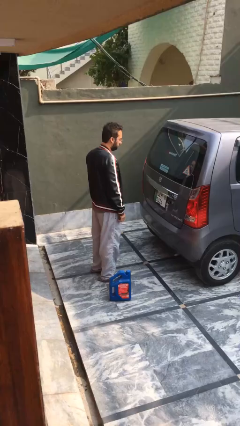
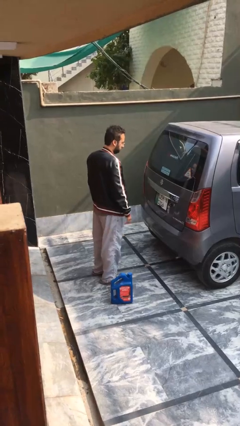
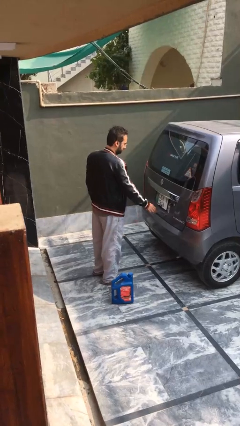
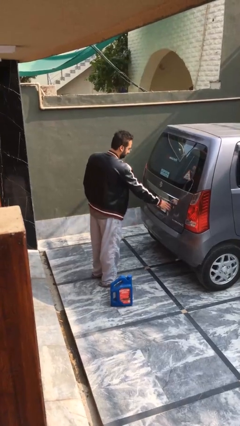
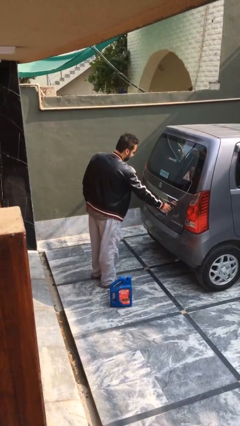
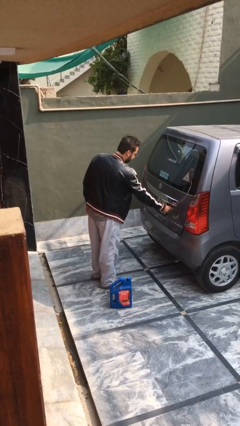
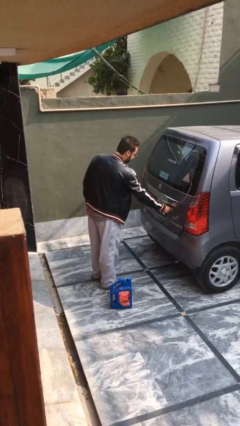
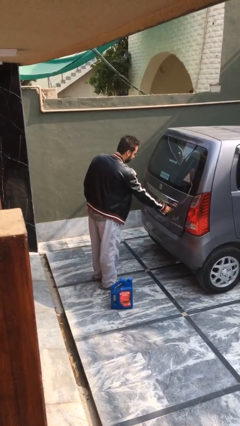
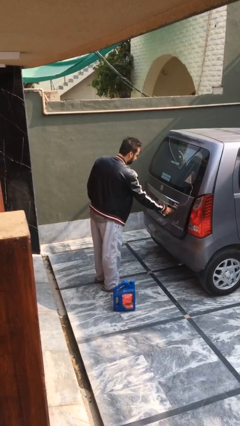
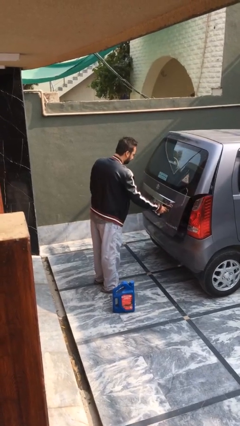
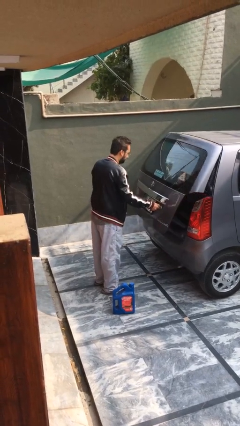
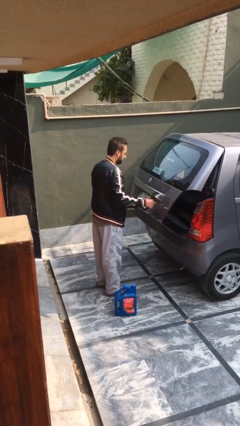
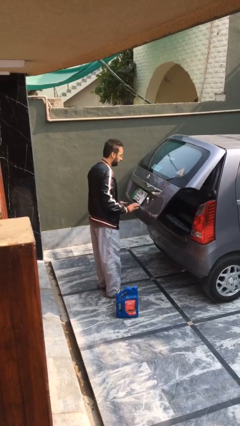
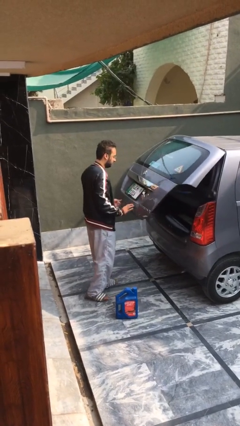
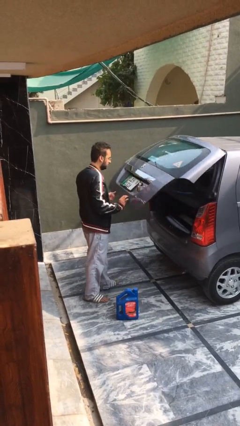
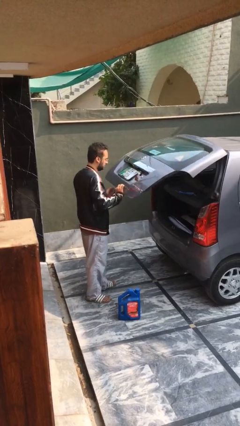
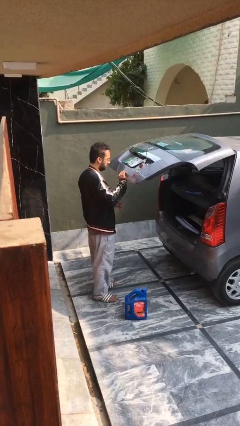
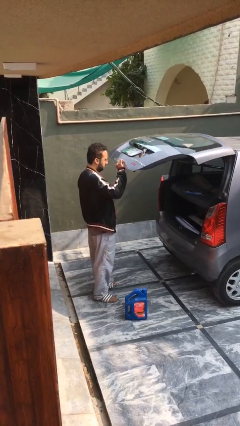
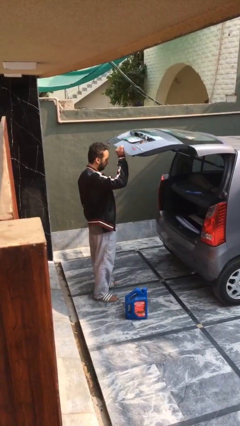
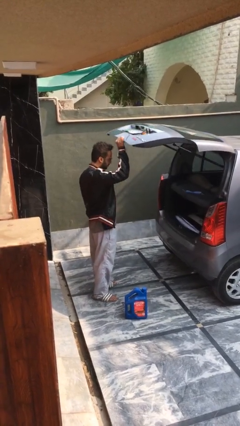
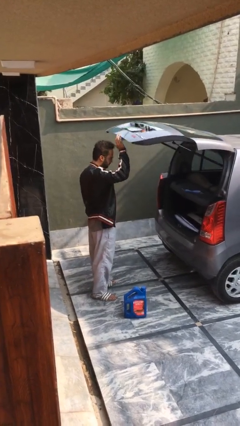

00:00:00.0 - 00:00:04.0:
person opens car trunk

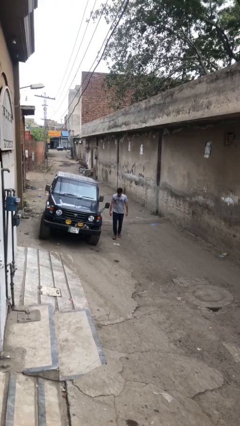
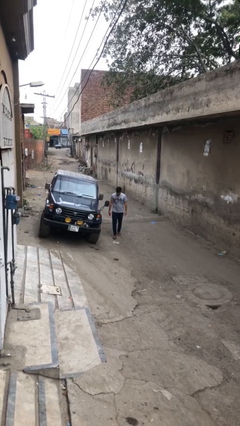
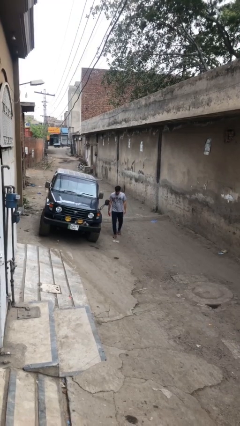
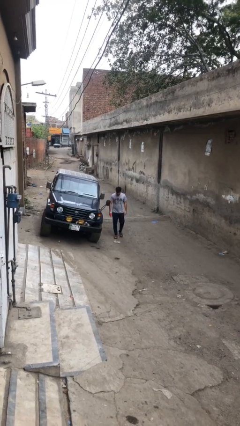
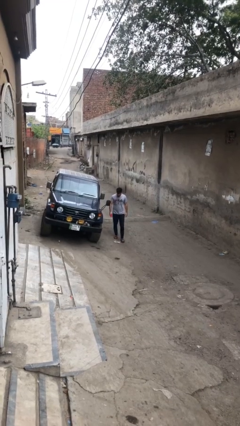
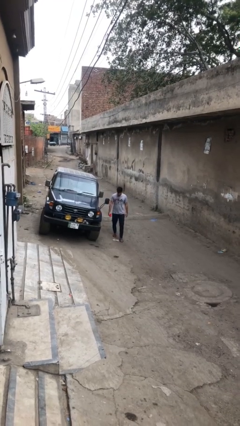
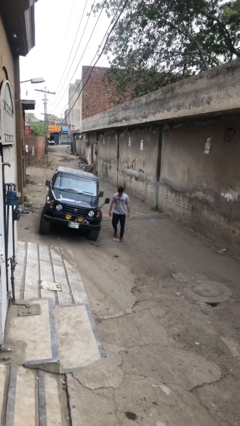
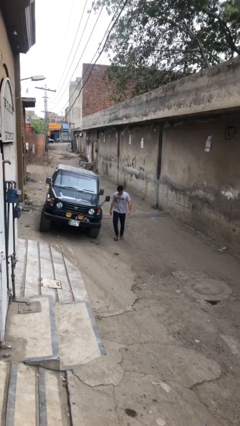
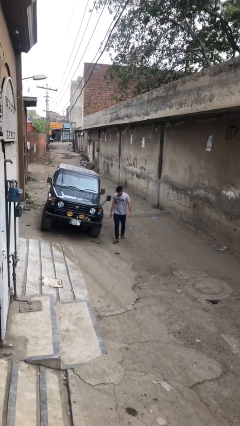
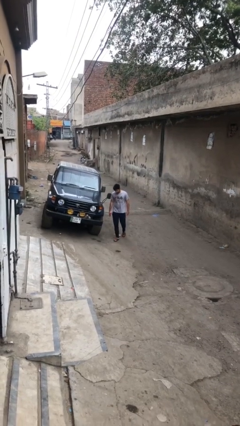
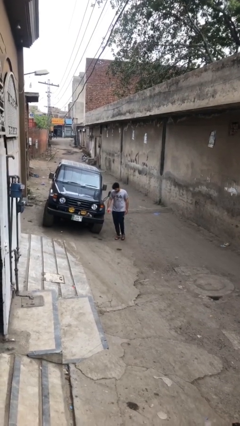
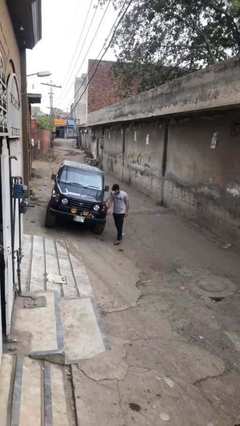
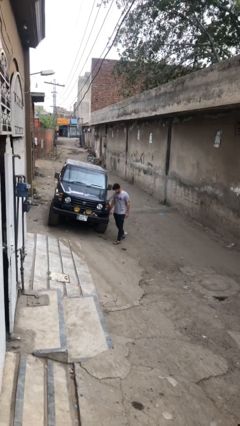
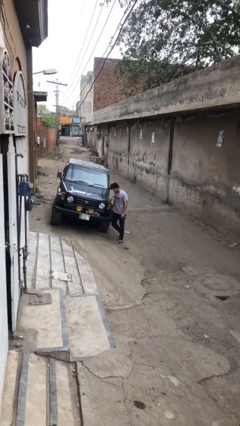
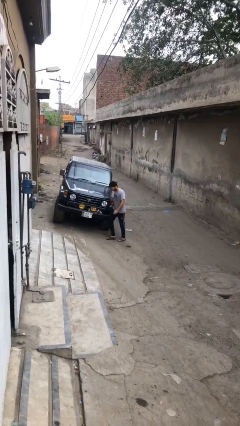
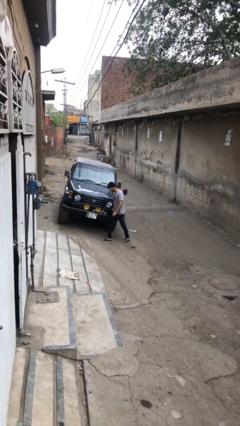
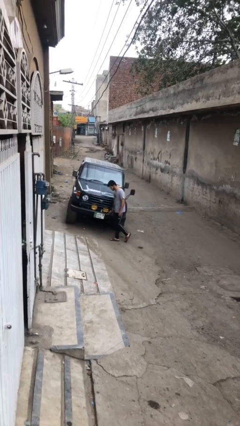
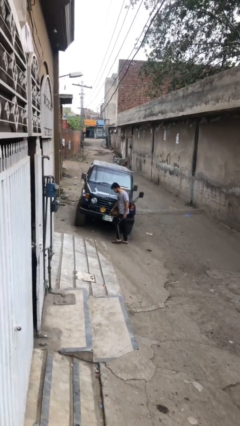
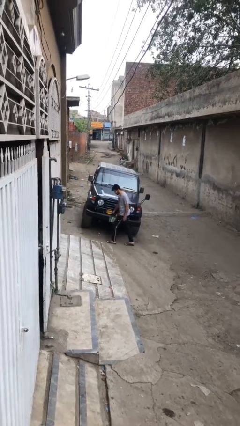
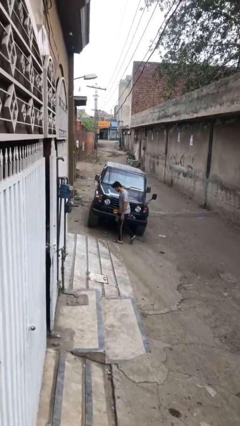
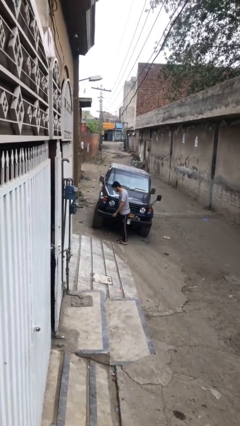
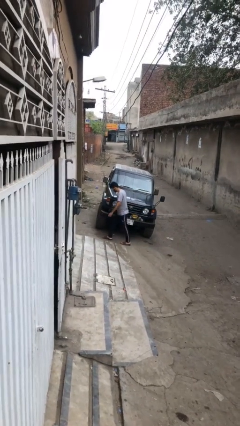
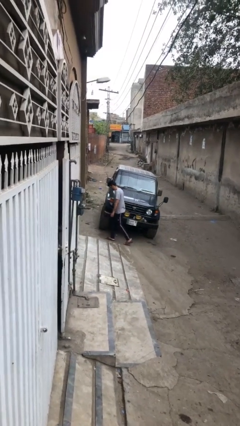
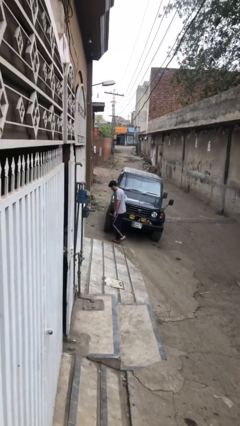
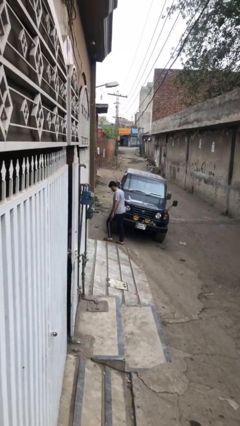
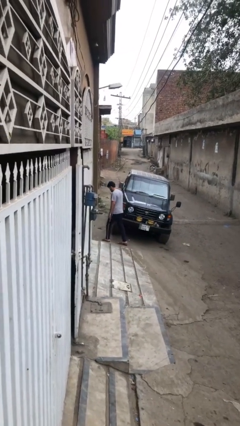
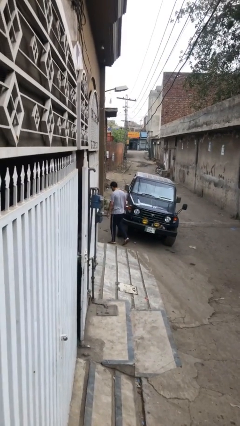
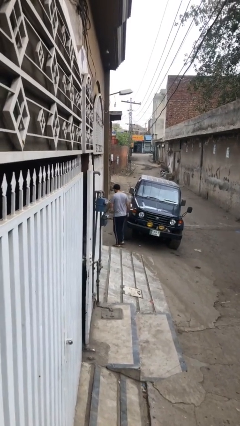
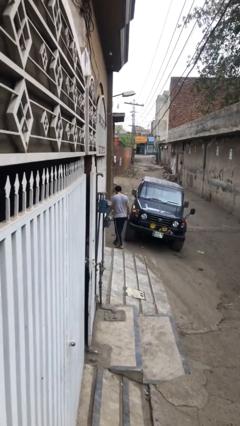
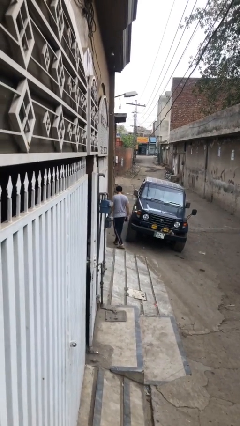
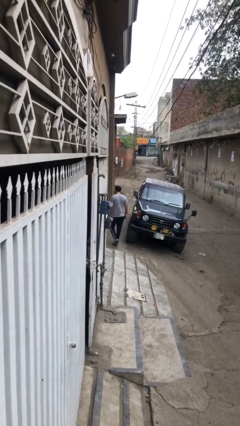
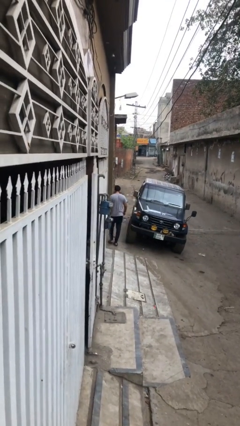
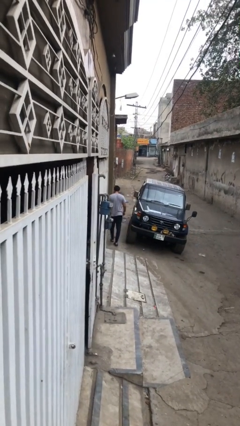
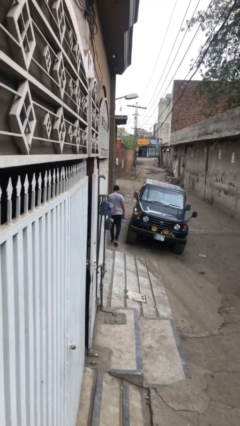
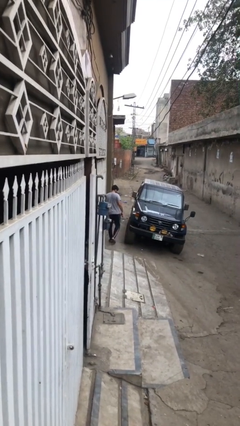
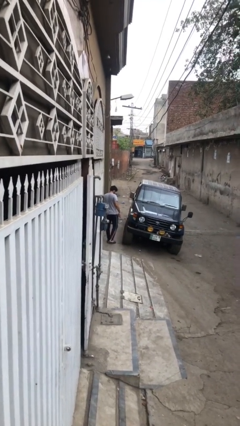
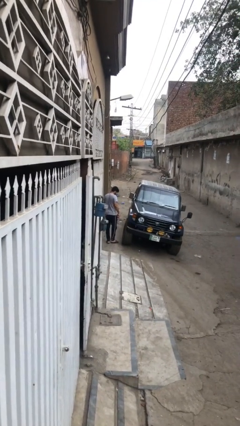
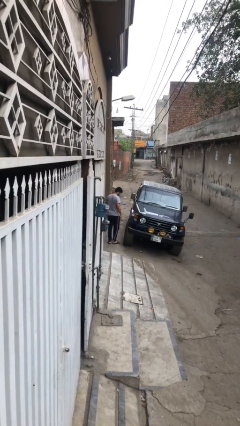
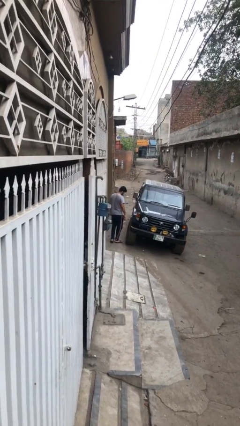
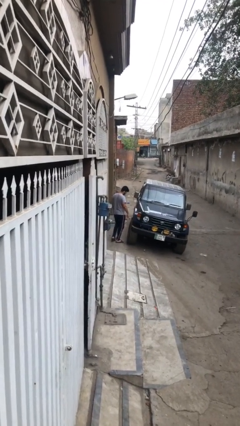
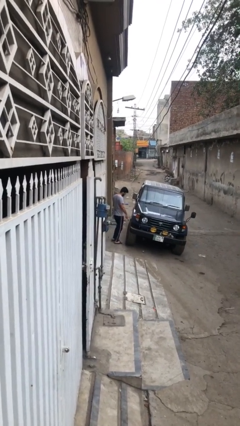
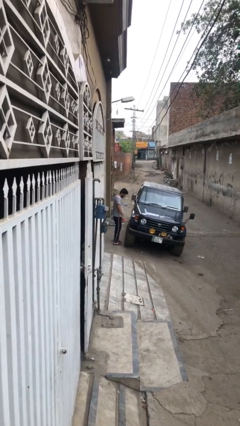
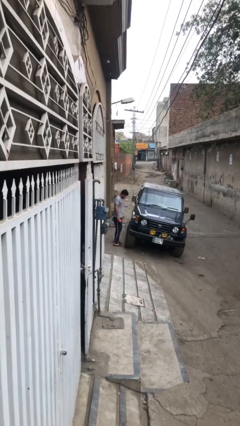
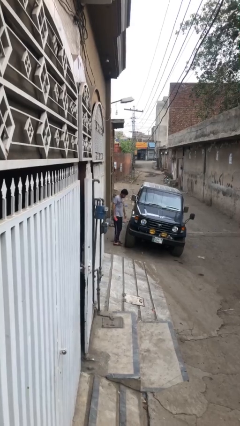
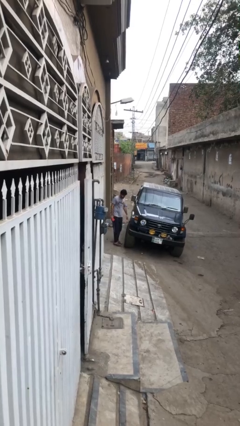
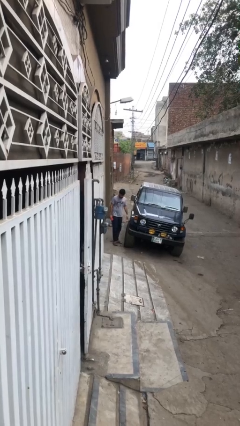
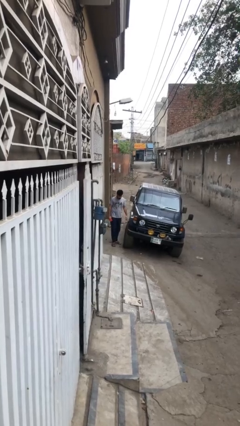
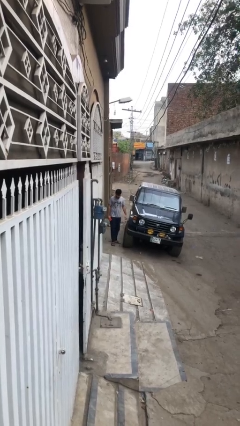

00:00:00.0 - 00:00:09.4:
person walks around car

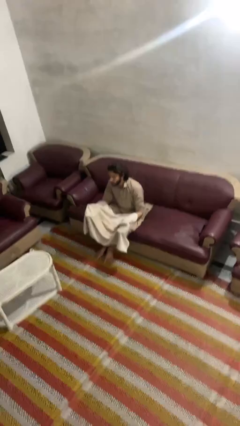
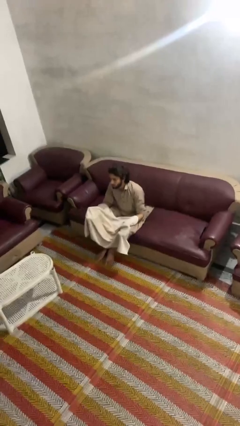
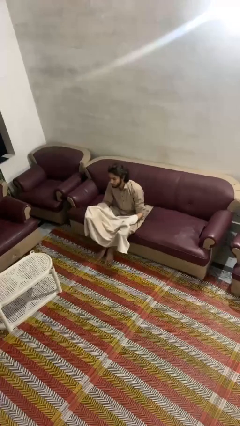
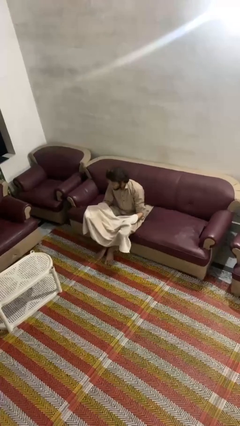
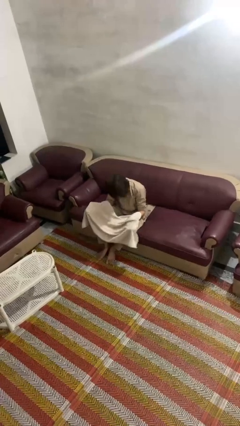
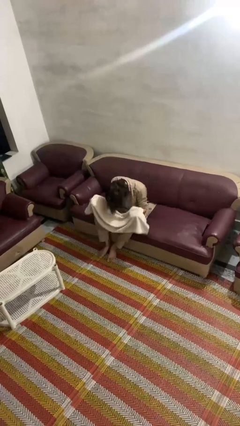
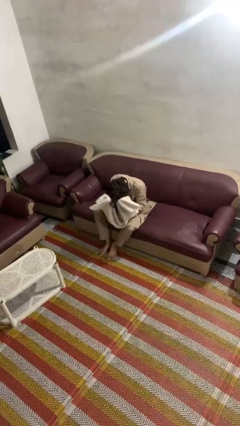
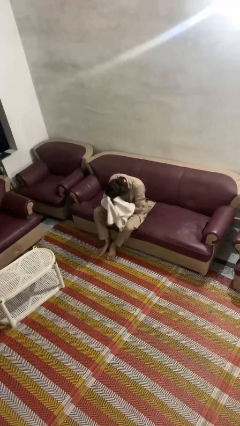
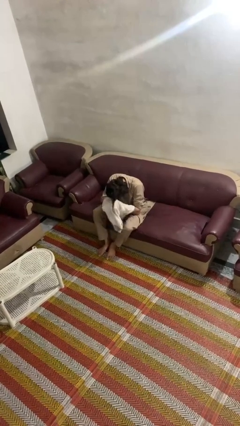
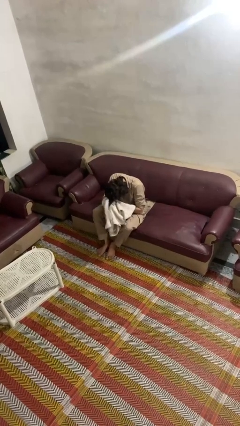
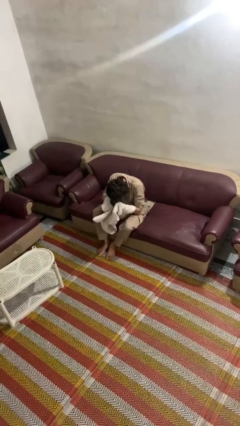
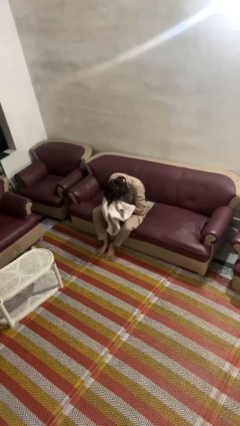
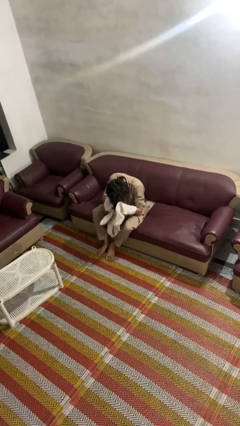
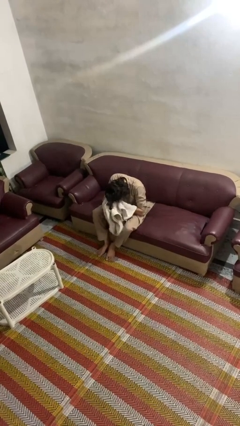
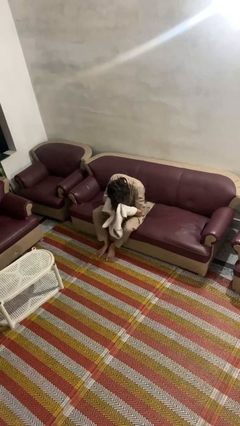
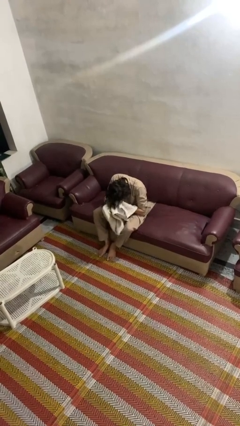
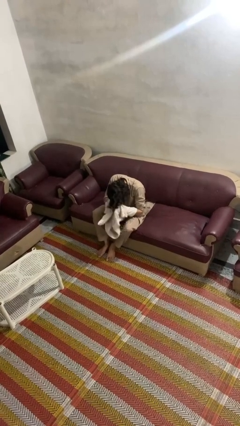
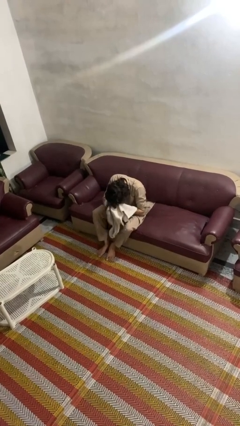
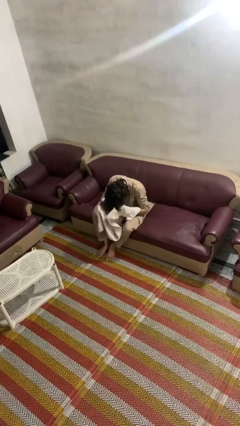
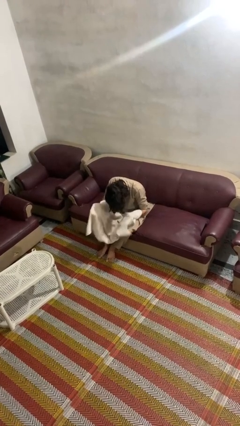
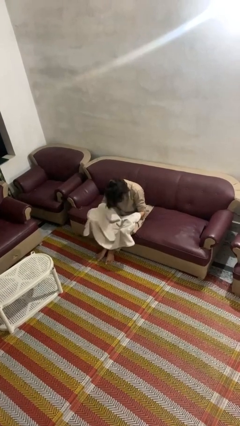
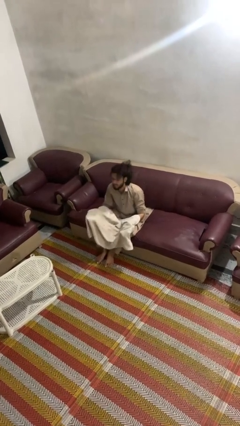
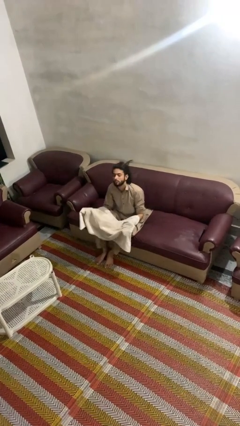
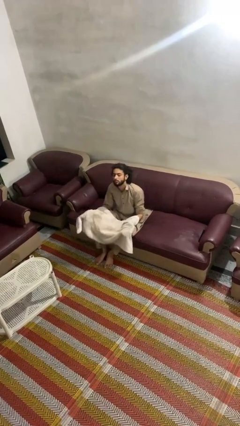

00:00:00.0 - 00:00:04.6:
person dries hair with towel

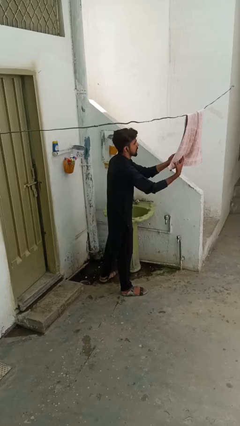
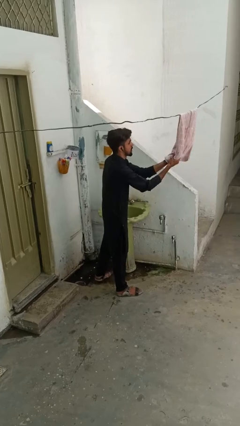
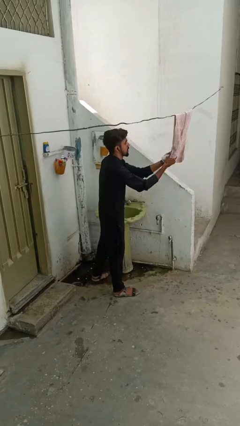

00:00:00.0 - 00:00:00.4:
person dries hands with towel
